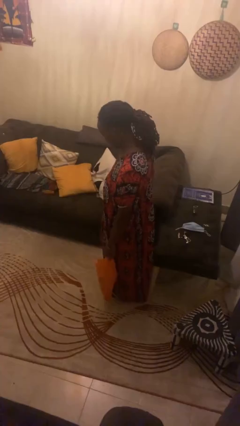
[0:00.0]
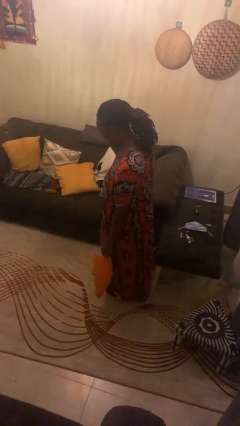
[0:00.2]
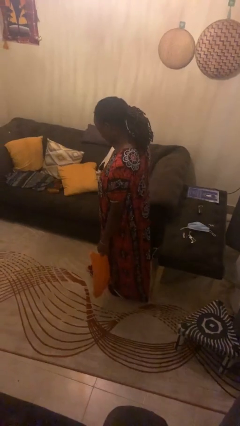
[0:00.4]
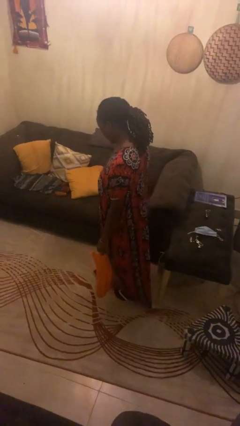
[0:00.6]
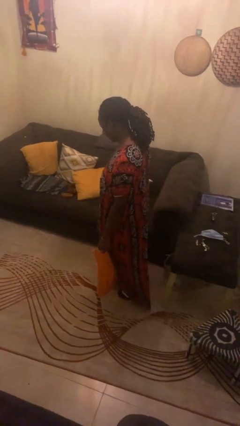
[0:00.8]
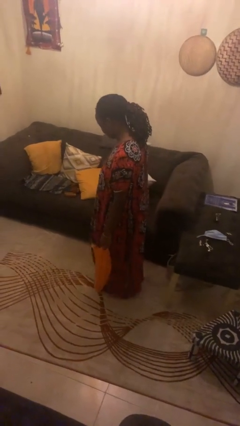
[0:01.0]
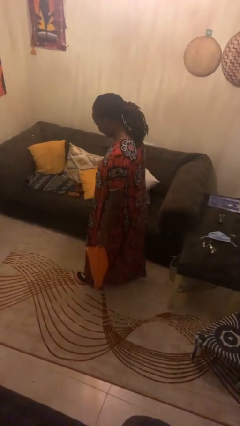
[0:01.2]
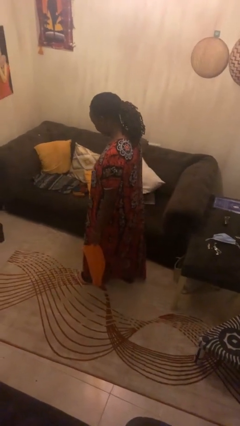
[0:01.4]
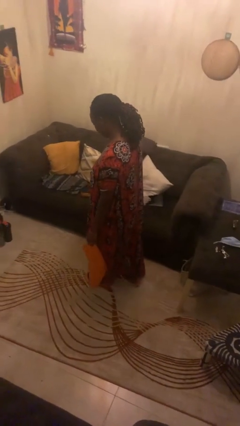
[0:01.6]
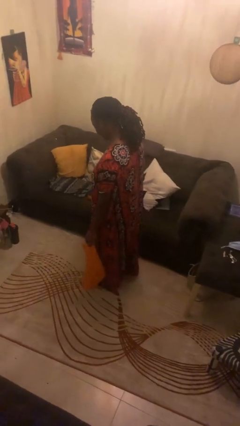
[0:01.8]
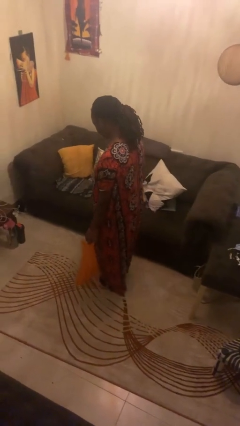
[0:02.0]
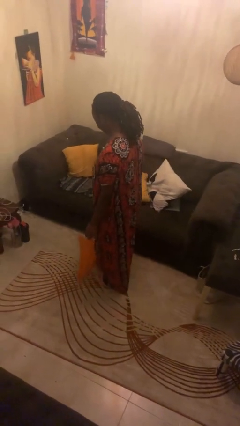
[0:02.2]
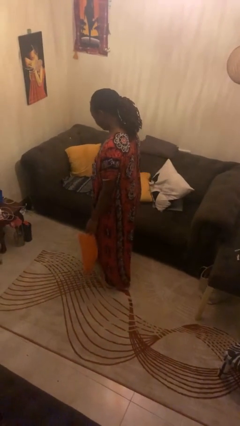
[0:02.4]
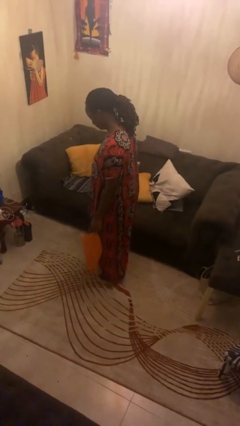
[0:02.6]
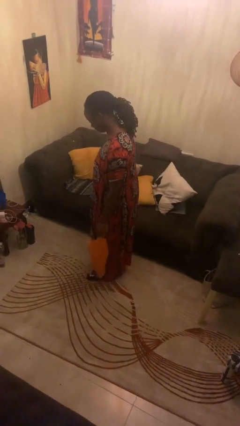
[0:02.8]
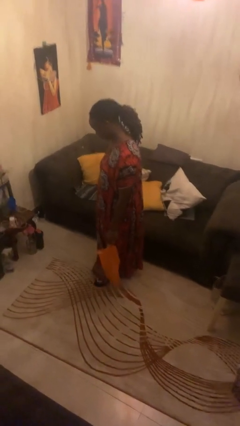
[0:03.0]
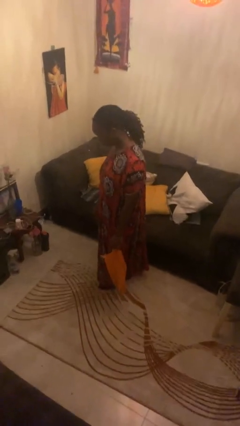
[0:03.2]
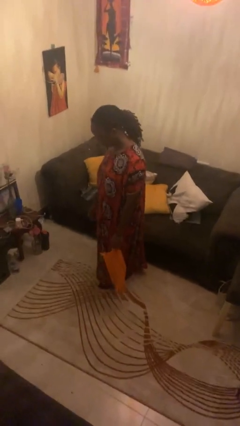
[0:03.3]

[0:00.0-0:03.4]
person carries groceries

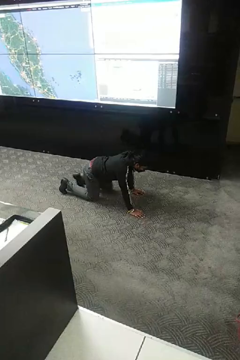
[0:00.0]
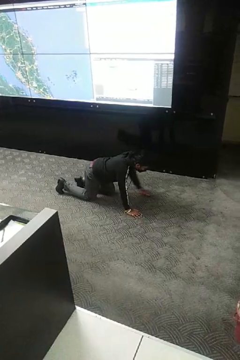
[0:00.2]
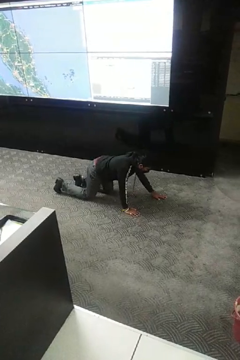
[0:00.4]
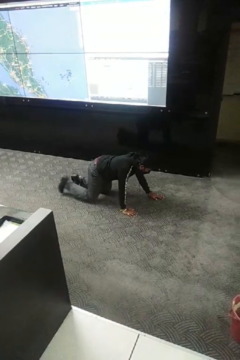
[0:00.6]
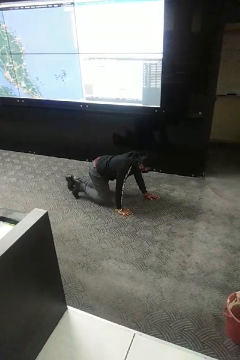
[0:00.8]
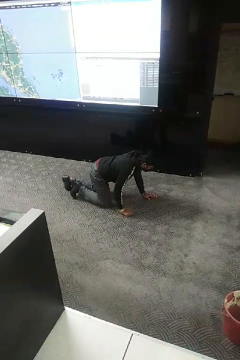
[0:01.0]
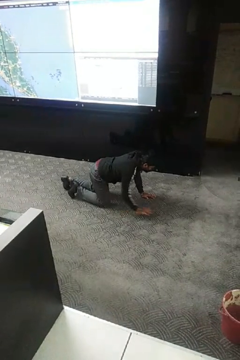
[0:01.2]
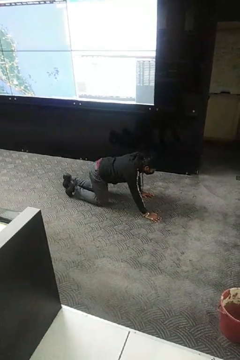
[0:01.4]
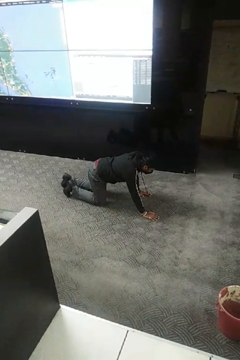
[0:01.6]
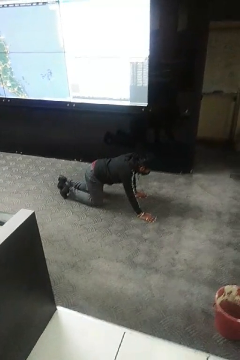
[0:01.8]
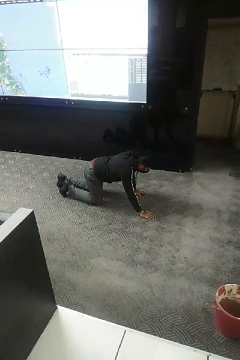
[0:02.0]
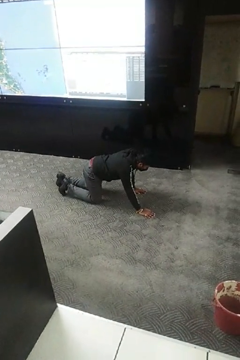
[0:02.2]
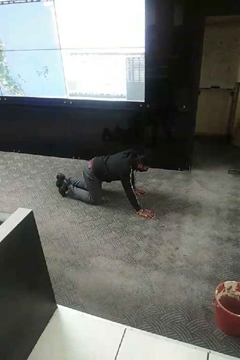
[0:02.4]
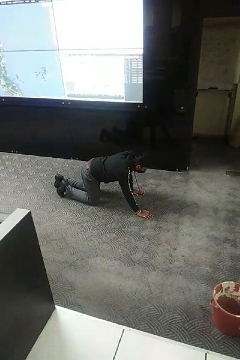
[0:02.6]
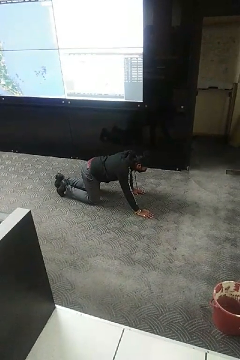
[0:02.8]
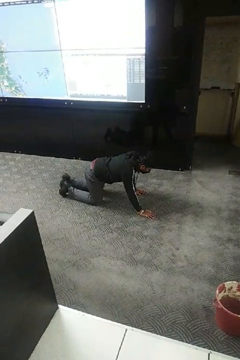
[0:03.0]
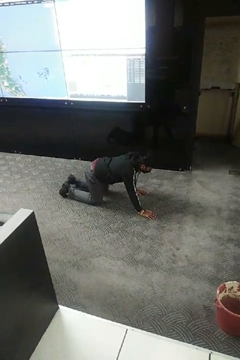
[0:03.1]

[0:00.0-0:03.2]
person crawls

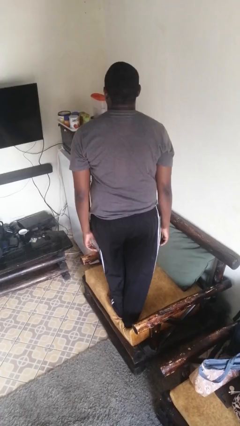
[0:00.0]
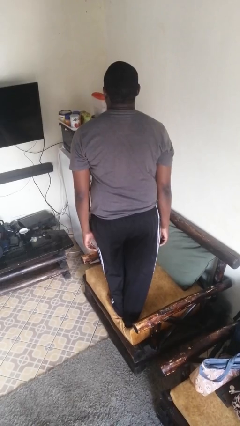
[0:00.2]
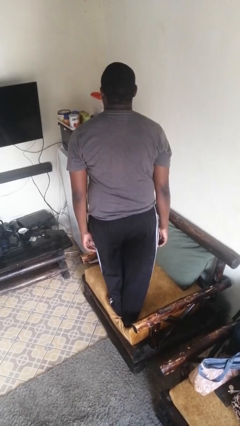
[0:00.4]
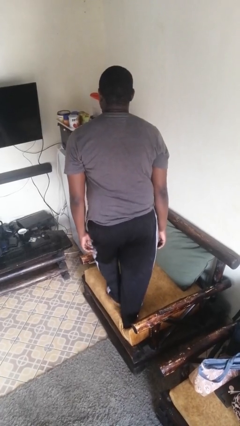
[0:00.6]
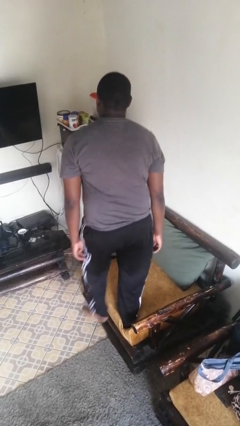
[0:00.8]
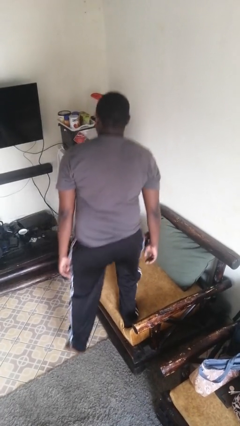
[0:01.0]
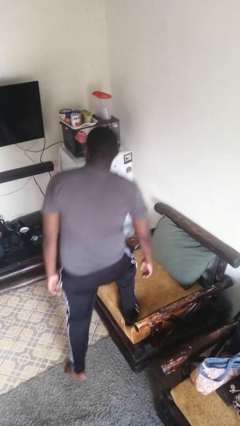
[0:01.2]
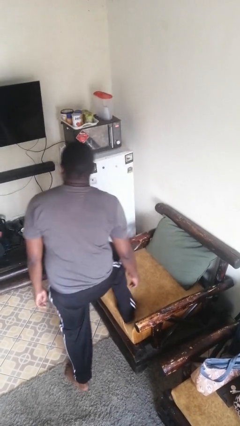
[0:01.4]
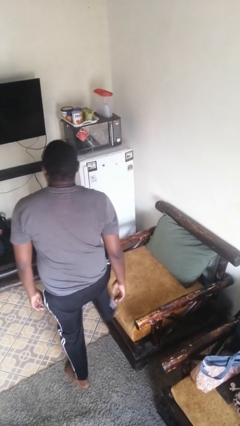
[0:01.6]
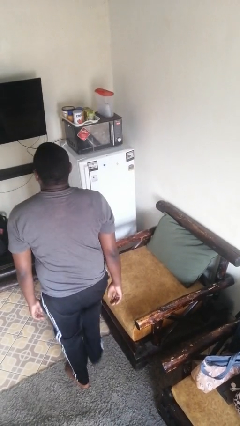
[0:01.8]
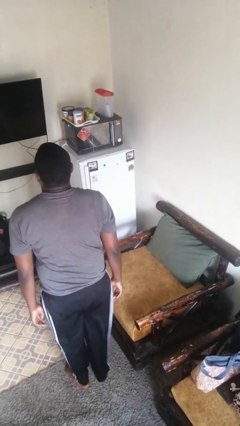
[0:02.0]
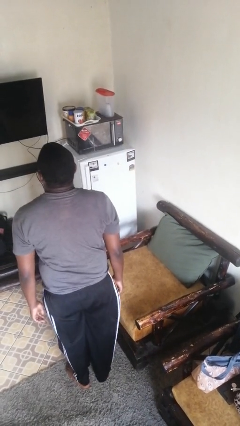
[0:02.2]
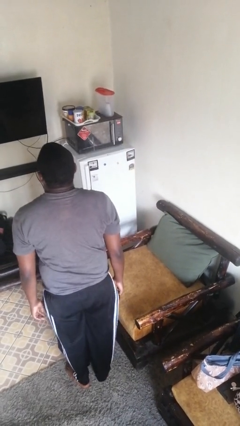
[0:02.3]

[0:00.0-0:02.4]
person climbs off couch

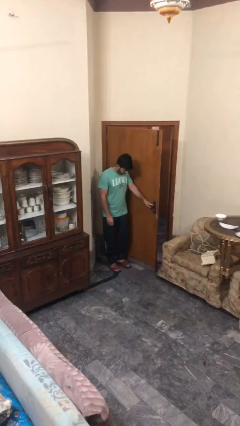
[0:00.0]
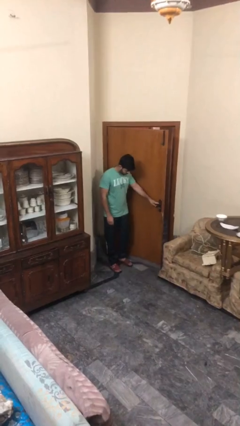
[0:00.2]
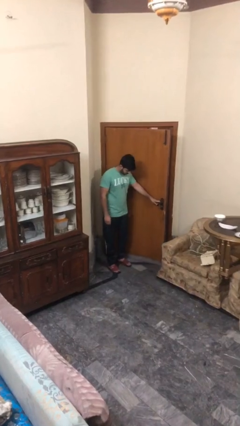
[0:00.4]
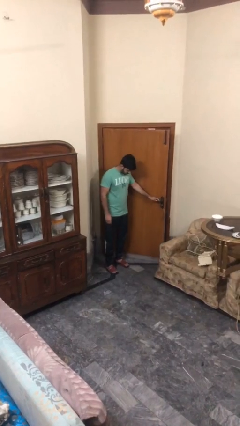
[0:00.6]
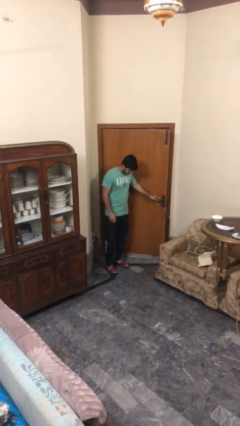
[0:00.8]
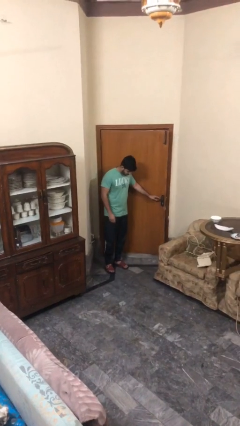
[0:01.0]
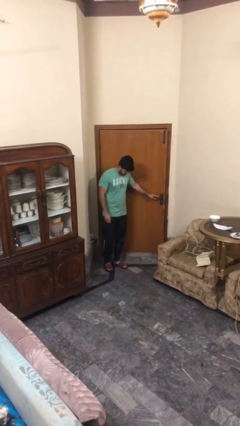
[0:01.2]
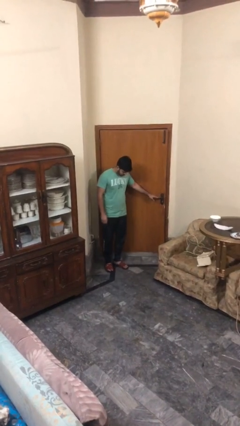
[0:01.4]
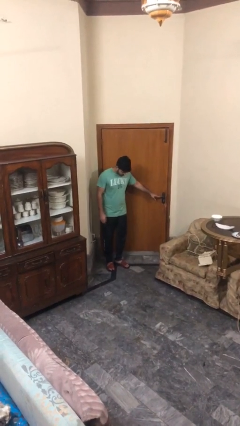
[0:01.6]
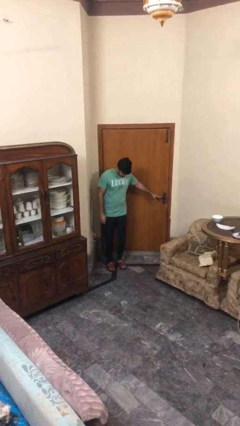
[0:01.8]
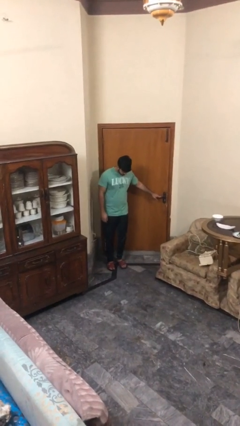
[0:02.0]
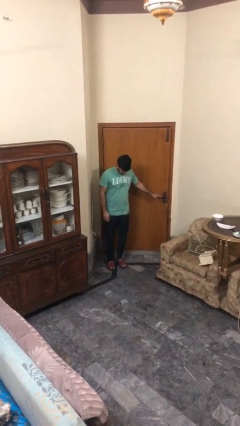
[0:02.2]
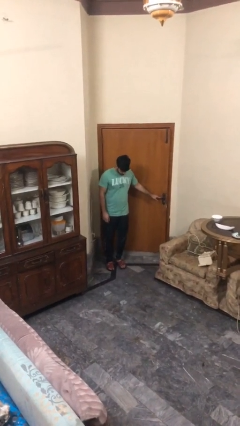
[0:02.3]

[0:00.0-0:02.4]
person closes facility door

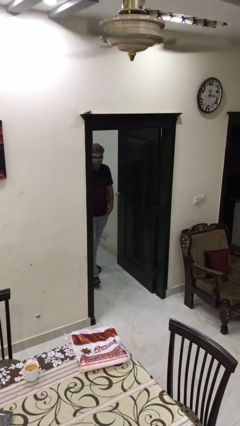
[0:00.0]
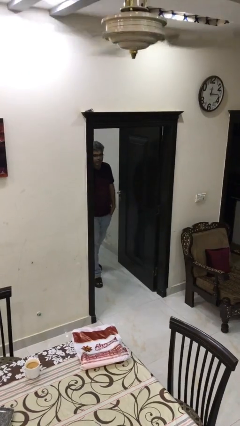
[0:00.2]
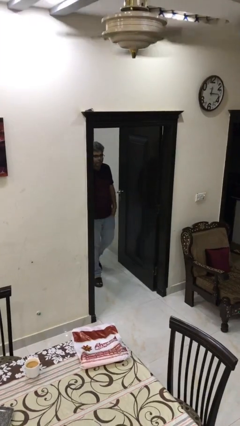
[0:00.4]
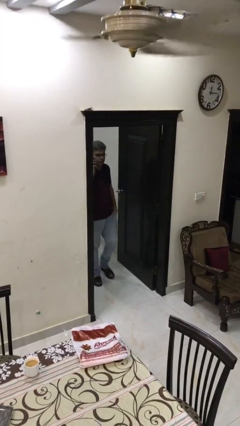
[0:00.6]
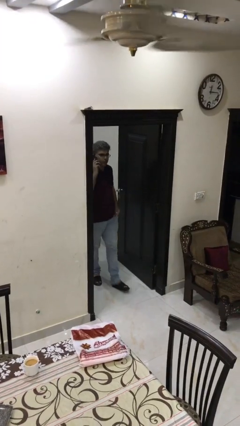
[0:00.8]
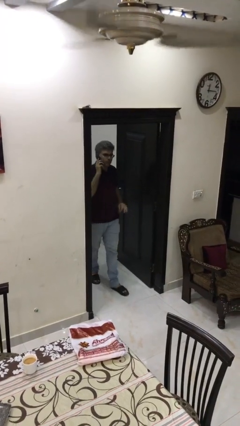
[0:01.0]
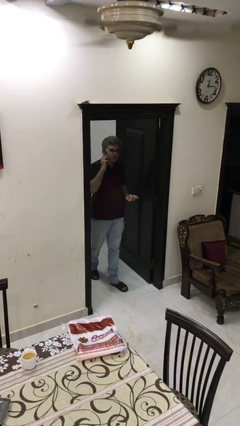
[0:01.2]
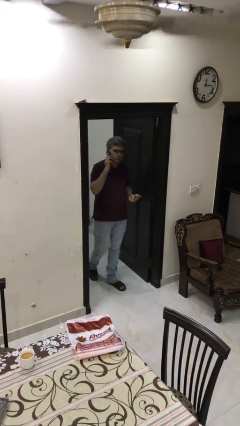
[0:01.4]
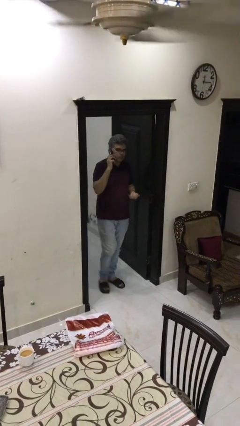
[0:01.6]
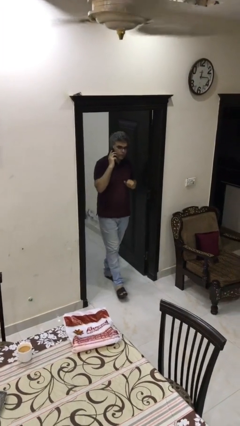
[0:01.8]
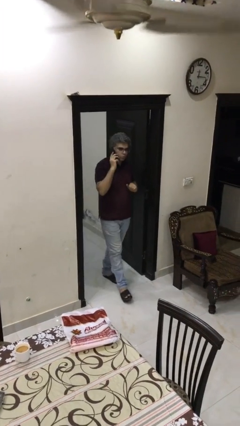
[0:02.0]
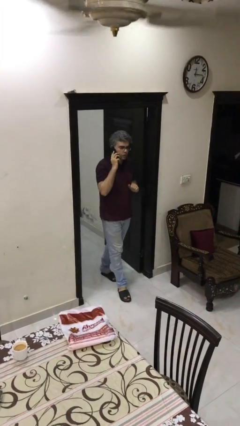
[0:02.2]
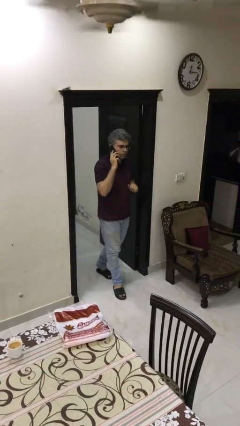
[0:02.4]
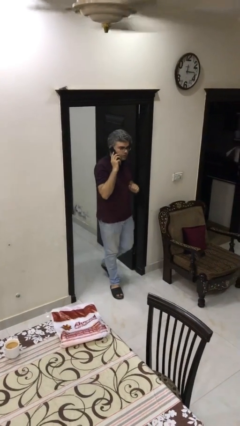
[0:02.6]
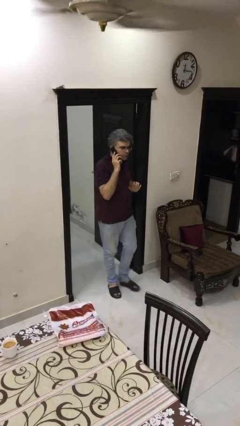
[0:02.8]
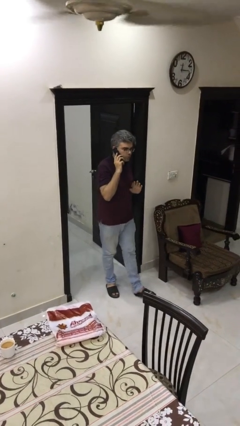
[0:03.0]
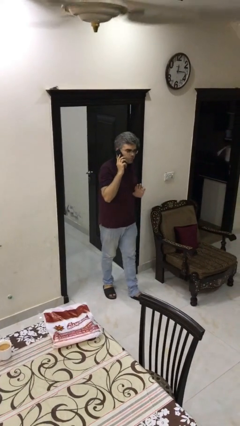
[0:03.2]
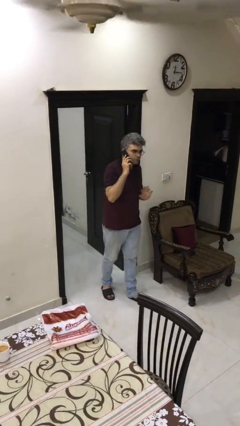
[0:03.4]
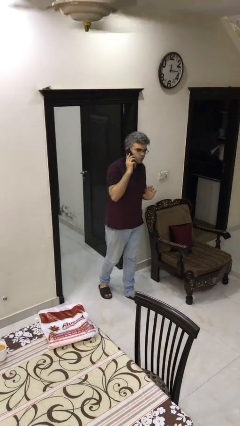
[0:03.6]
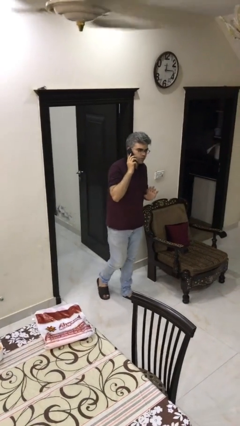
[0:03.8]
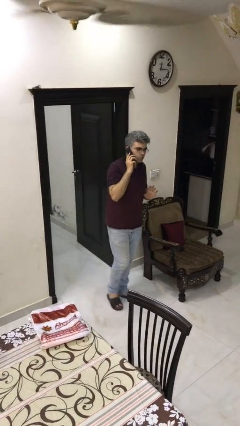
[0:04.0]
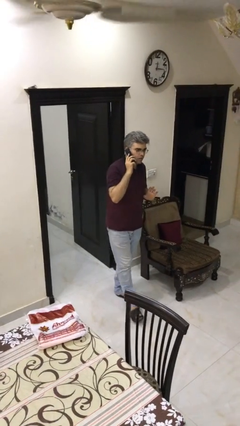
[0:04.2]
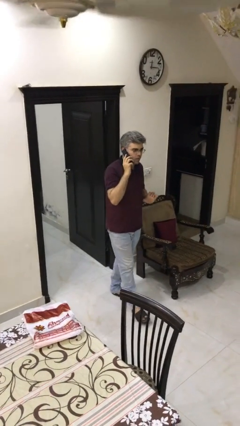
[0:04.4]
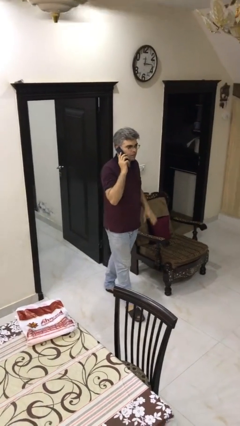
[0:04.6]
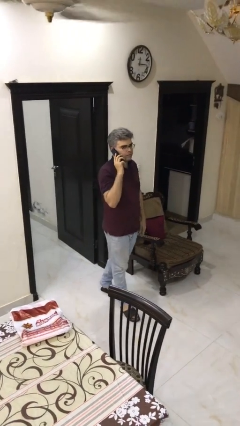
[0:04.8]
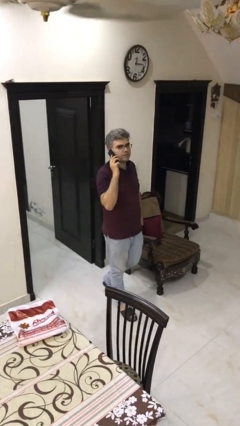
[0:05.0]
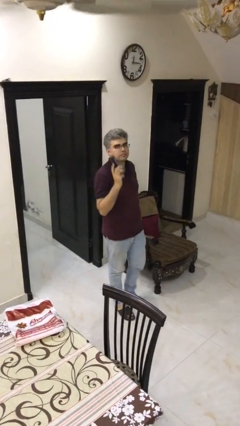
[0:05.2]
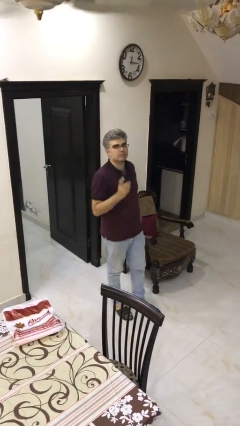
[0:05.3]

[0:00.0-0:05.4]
person enters scene through structure

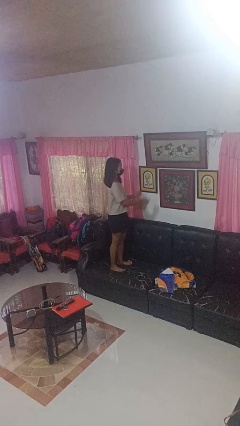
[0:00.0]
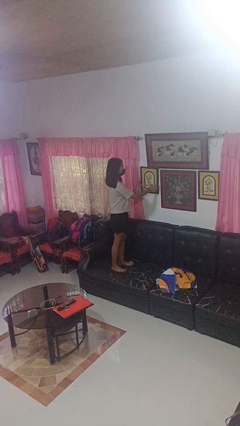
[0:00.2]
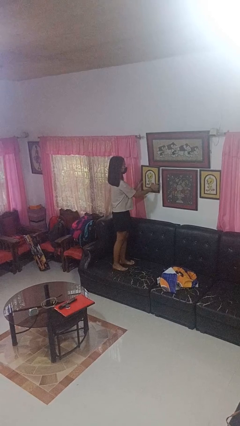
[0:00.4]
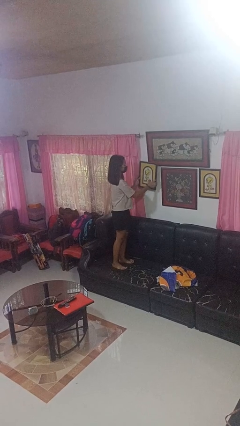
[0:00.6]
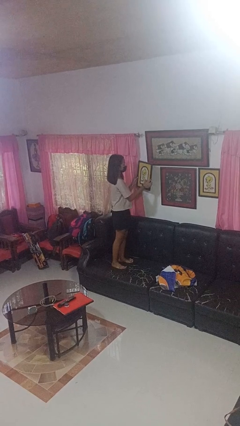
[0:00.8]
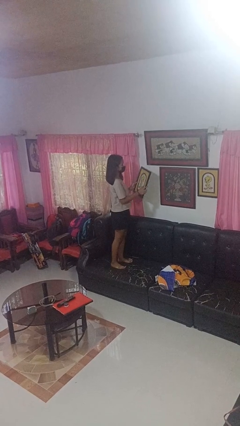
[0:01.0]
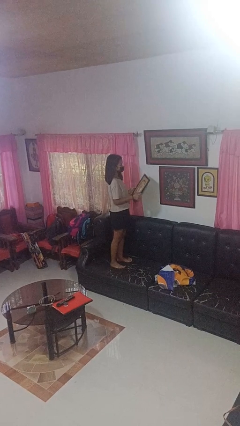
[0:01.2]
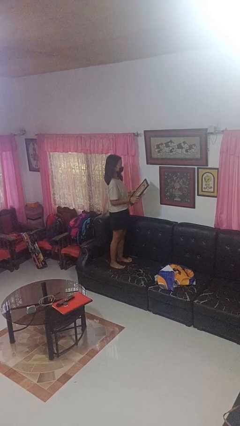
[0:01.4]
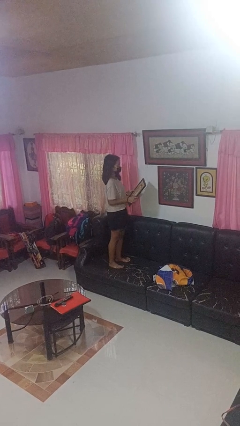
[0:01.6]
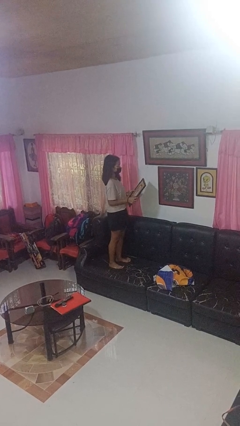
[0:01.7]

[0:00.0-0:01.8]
person takes down picture frame
